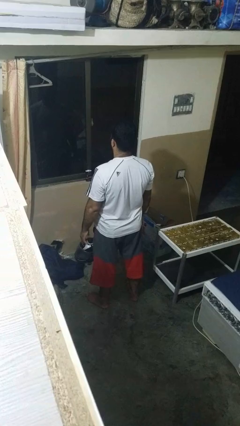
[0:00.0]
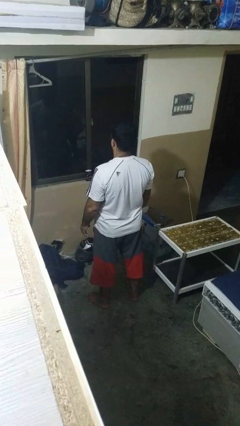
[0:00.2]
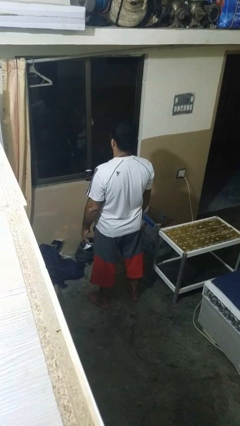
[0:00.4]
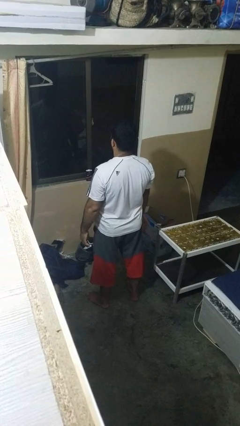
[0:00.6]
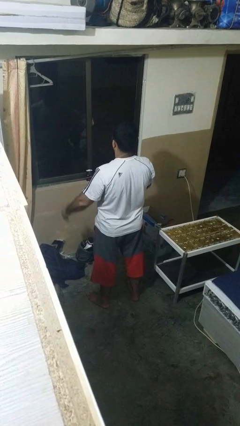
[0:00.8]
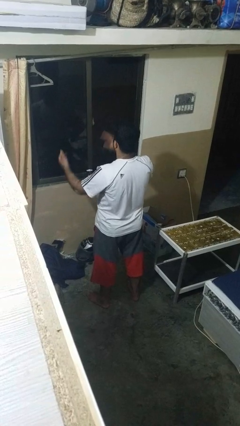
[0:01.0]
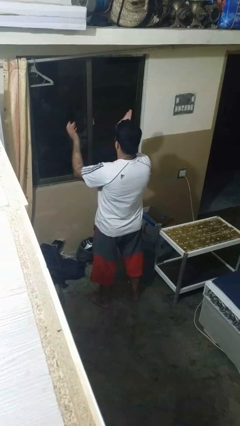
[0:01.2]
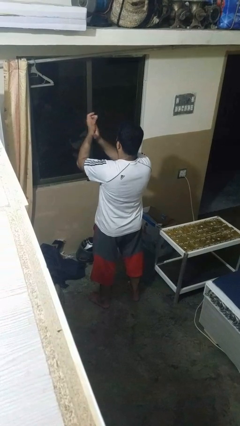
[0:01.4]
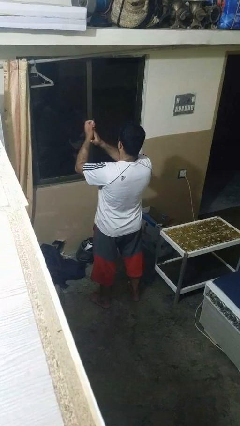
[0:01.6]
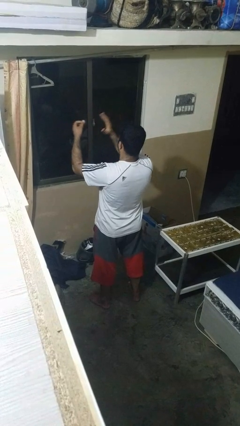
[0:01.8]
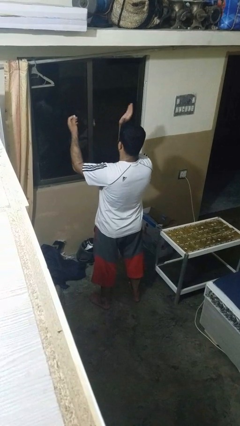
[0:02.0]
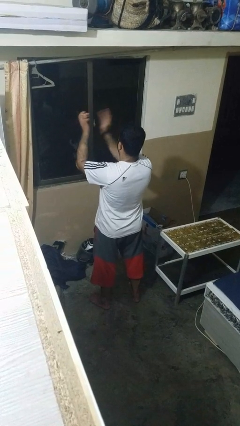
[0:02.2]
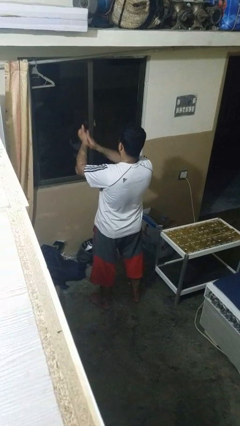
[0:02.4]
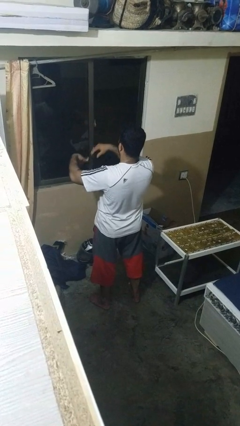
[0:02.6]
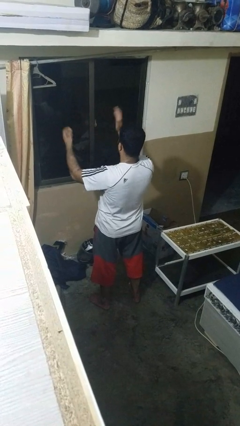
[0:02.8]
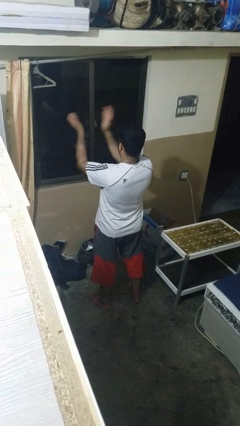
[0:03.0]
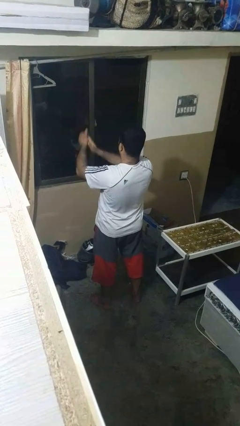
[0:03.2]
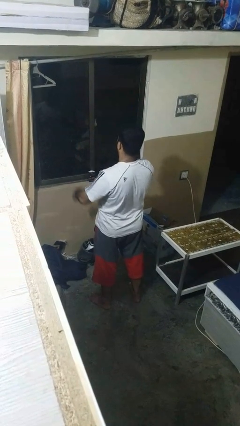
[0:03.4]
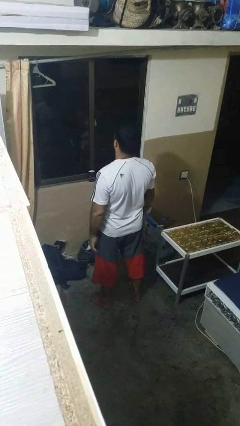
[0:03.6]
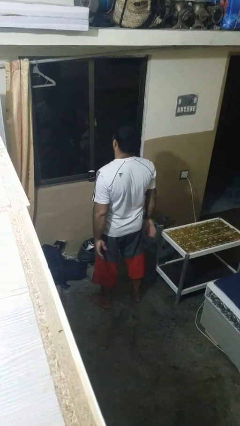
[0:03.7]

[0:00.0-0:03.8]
person claps hands

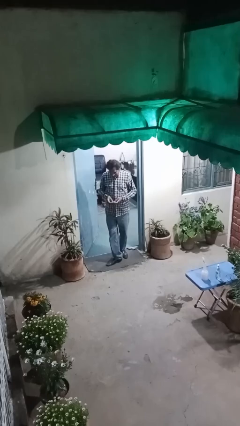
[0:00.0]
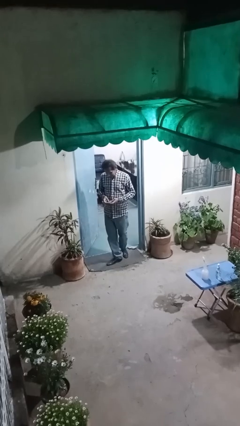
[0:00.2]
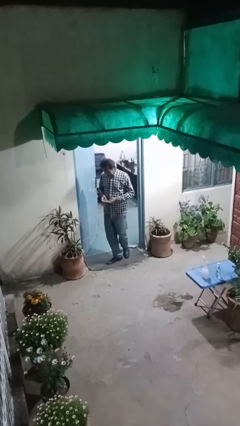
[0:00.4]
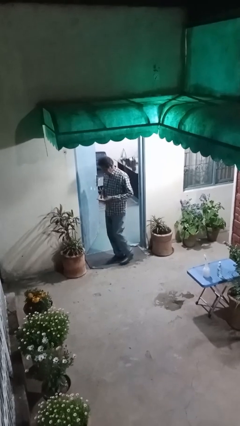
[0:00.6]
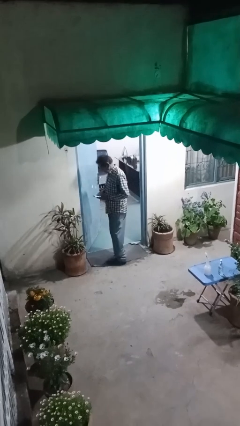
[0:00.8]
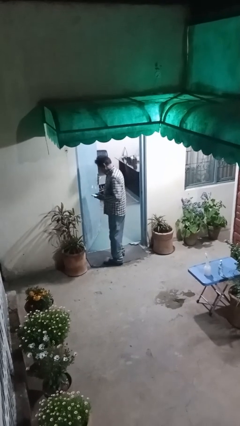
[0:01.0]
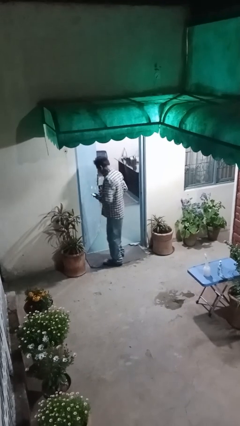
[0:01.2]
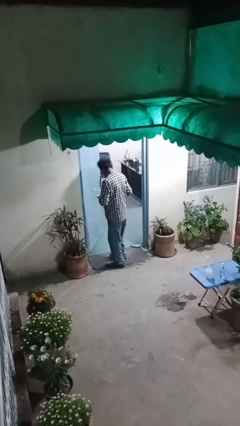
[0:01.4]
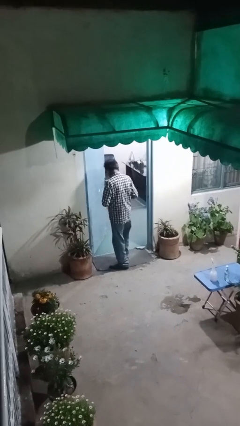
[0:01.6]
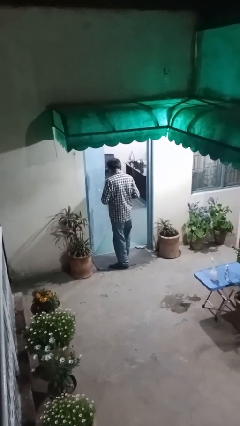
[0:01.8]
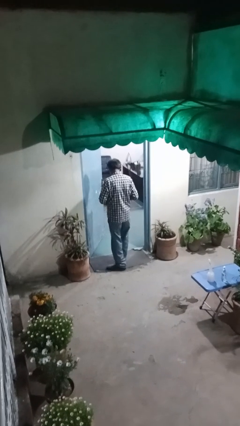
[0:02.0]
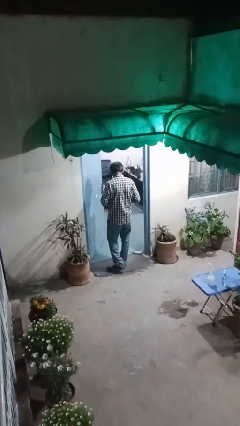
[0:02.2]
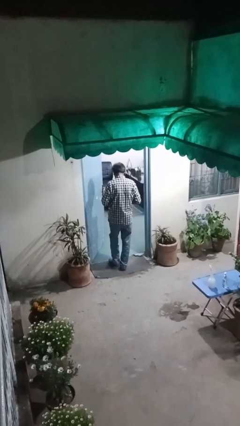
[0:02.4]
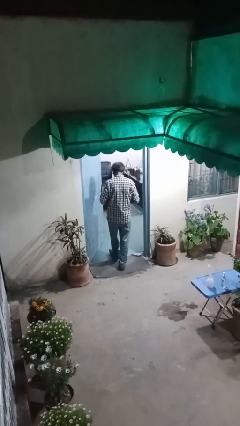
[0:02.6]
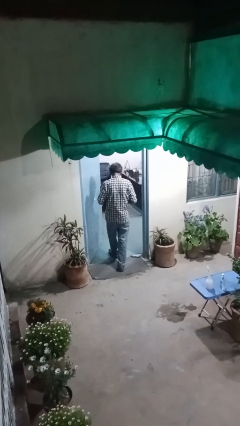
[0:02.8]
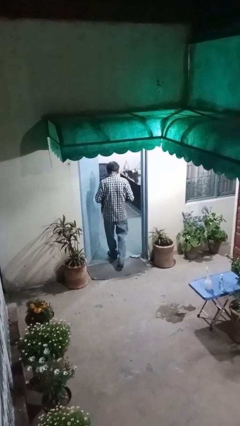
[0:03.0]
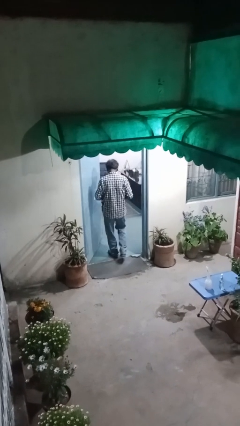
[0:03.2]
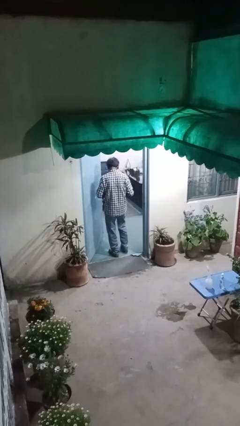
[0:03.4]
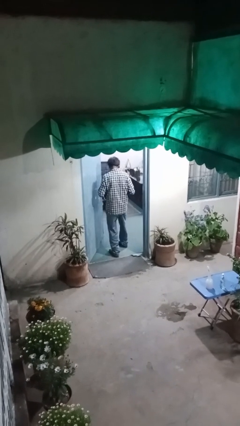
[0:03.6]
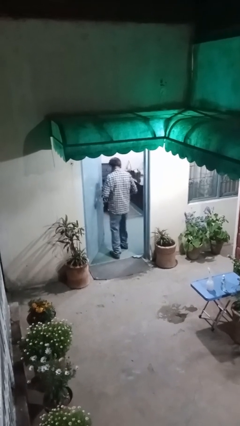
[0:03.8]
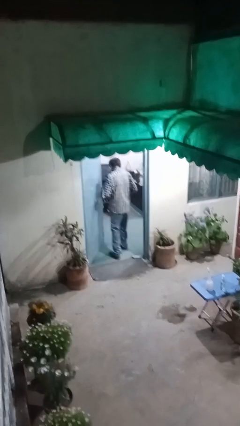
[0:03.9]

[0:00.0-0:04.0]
person exits scene through structure

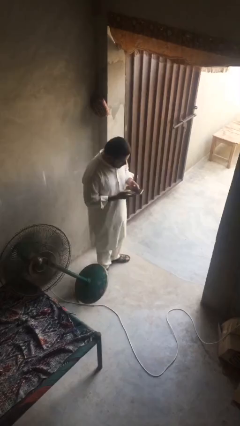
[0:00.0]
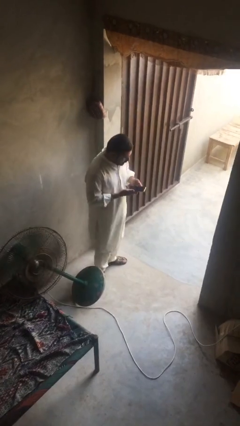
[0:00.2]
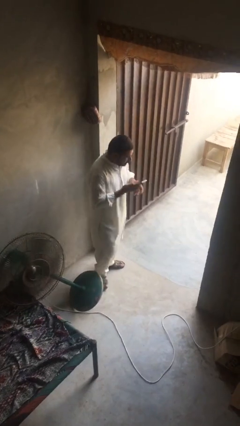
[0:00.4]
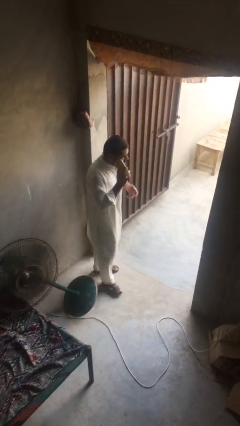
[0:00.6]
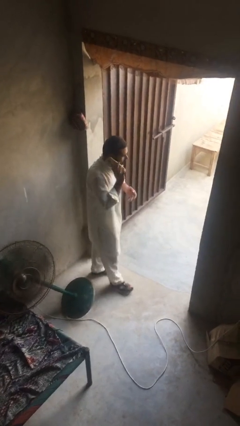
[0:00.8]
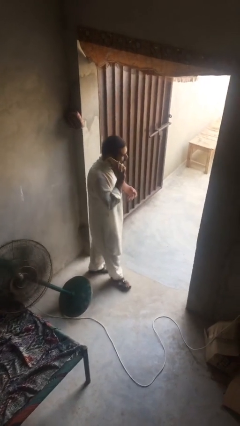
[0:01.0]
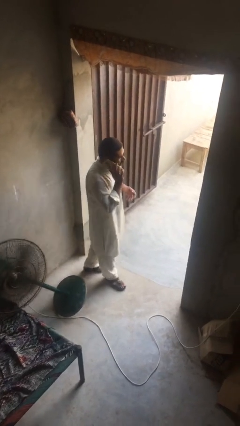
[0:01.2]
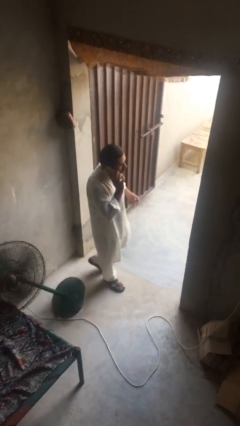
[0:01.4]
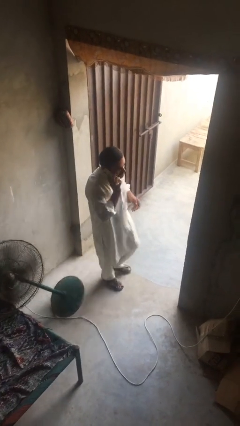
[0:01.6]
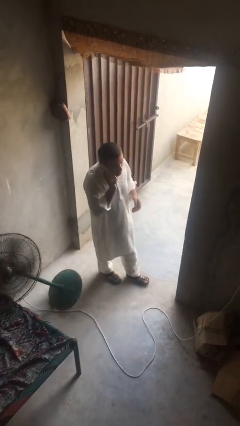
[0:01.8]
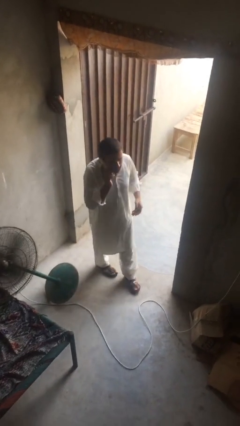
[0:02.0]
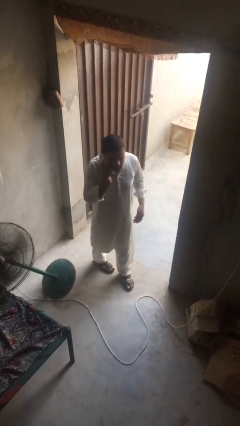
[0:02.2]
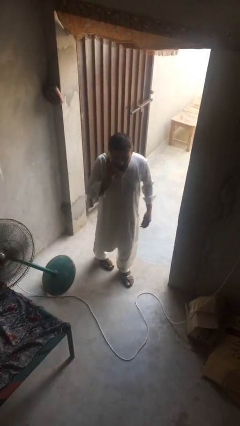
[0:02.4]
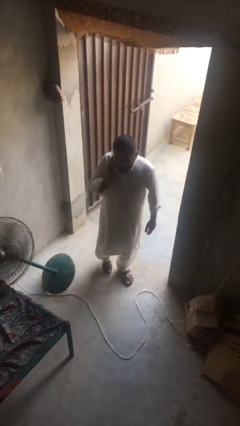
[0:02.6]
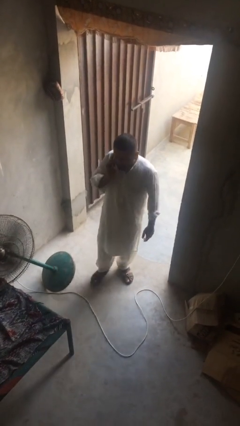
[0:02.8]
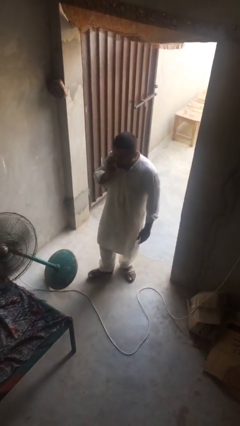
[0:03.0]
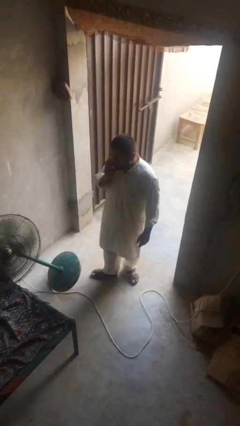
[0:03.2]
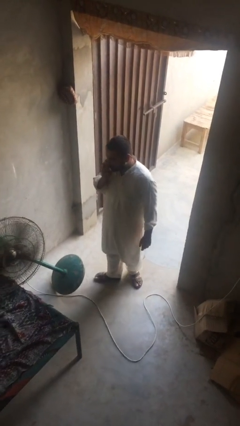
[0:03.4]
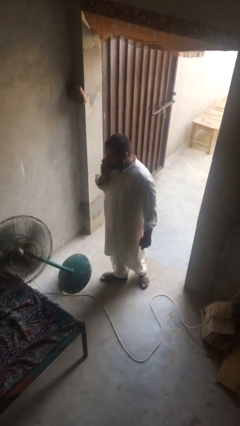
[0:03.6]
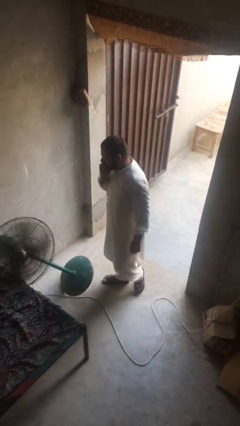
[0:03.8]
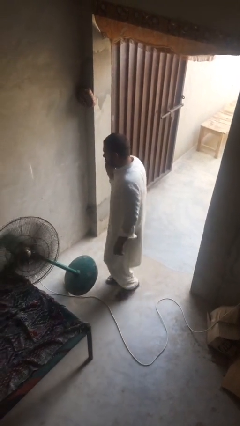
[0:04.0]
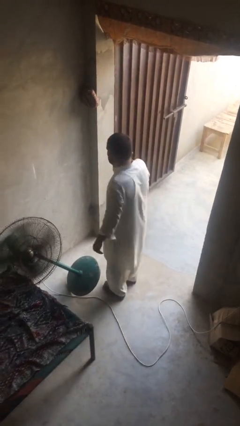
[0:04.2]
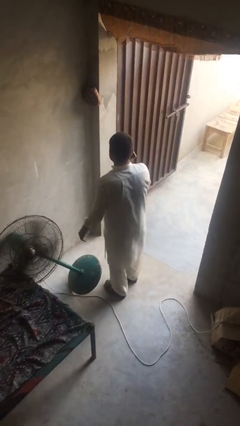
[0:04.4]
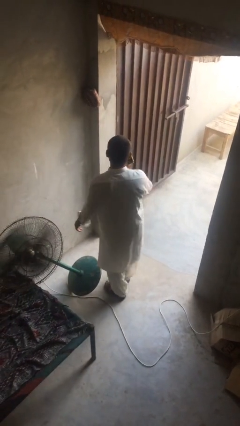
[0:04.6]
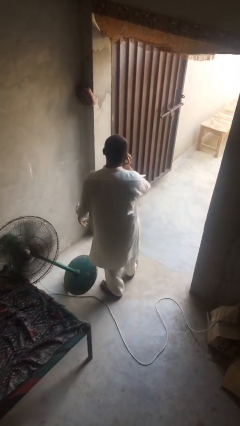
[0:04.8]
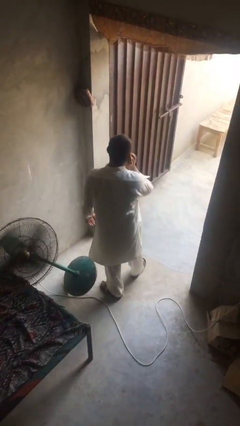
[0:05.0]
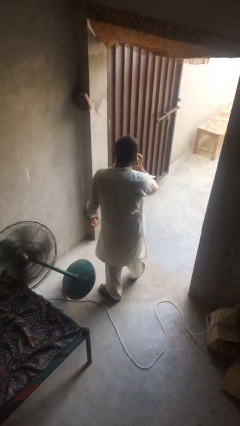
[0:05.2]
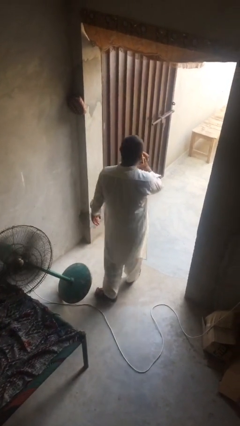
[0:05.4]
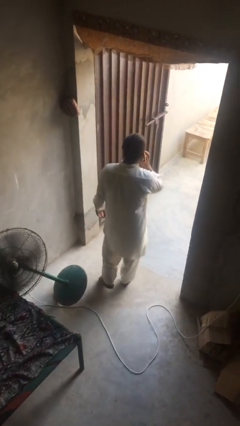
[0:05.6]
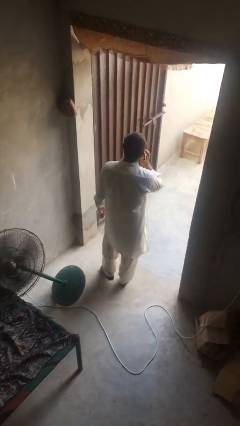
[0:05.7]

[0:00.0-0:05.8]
person talks on phone

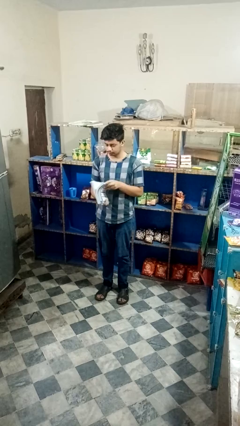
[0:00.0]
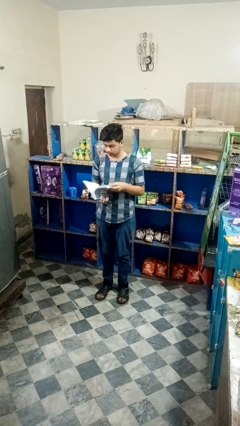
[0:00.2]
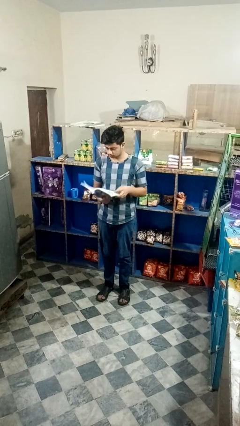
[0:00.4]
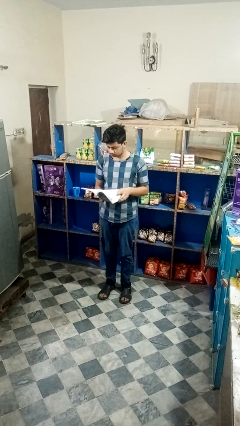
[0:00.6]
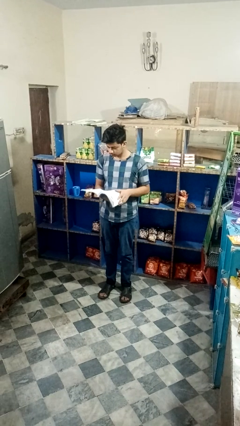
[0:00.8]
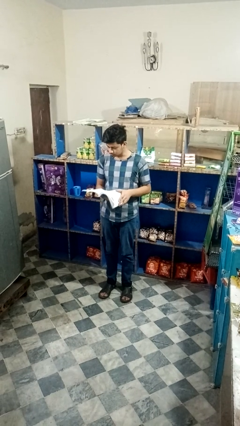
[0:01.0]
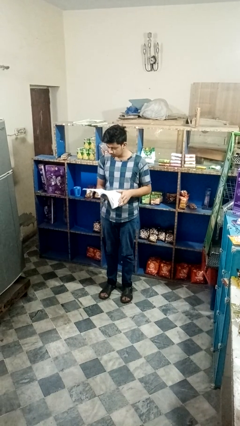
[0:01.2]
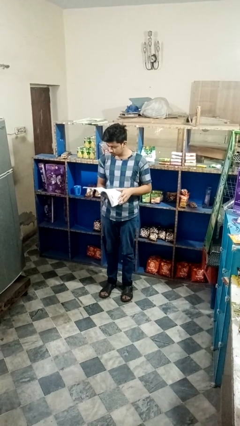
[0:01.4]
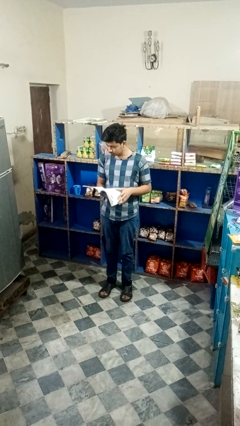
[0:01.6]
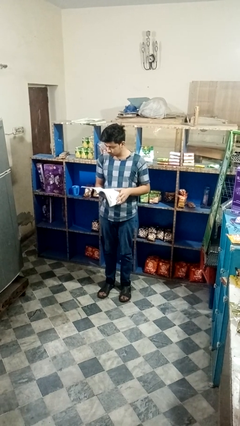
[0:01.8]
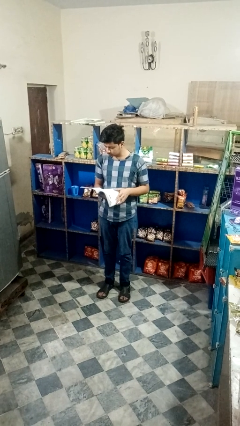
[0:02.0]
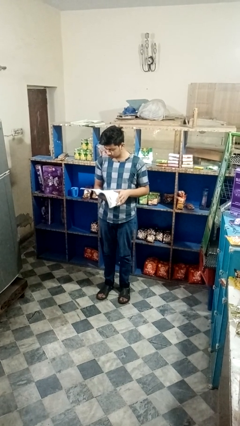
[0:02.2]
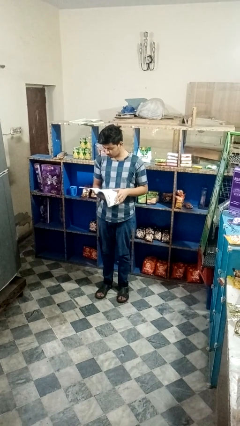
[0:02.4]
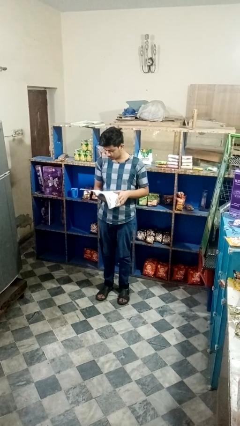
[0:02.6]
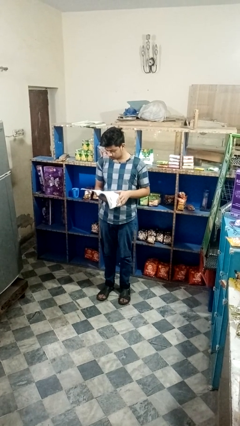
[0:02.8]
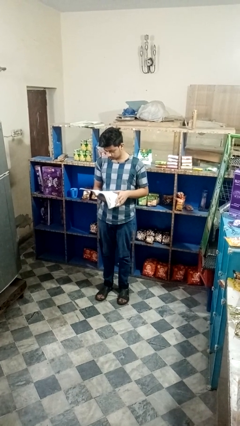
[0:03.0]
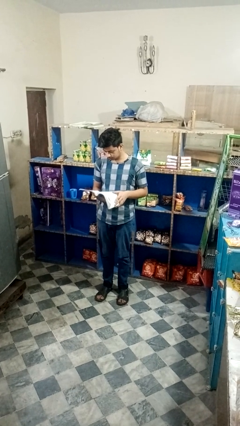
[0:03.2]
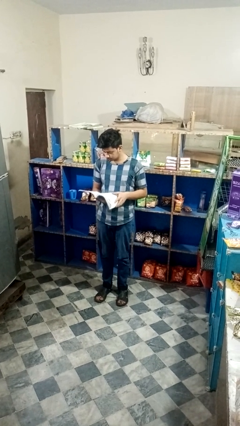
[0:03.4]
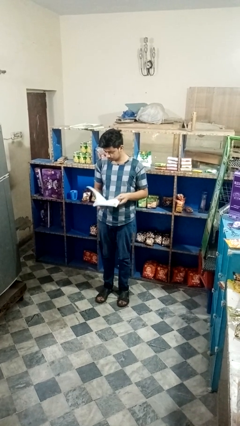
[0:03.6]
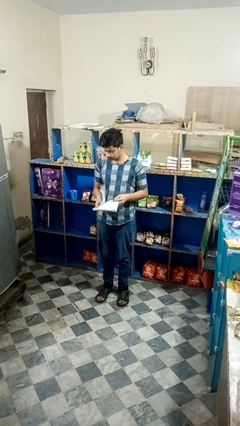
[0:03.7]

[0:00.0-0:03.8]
person reads book

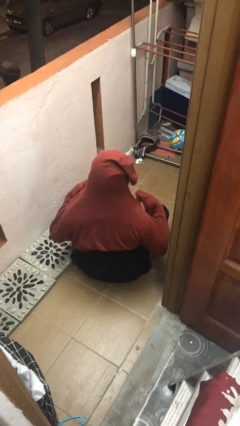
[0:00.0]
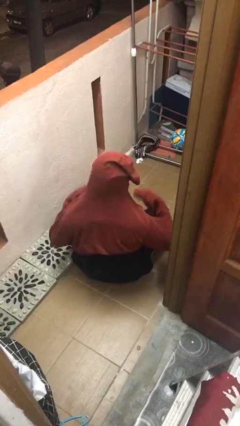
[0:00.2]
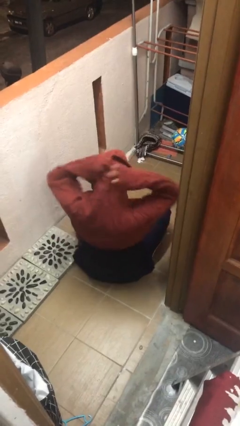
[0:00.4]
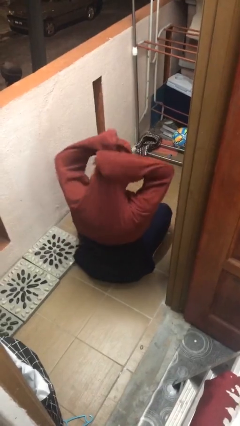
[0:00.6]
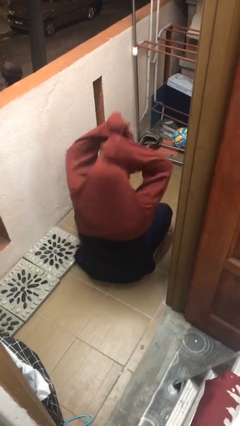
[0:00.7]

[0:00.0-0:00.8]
person takes off hoodie
